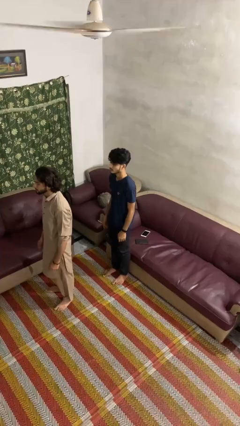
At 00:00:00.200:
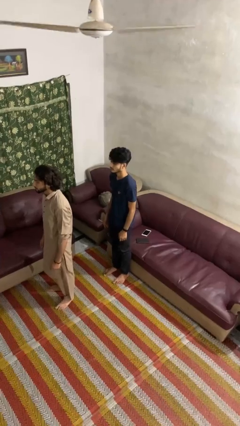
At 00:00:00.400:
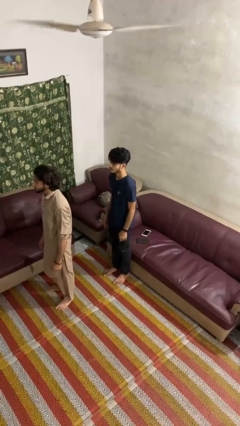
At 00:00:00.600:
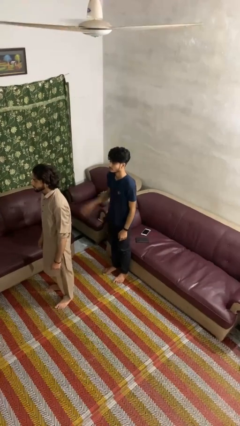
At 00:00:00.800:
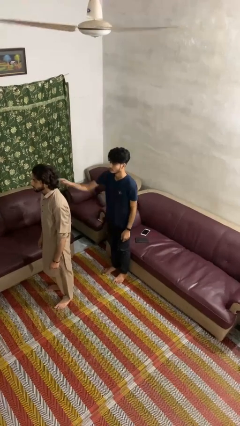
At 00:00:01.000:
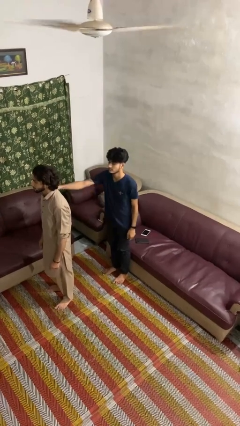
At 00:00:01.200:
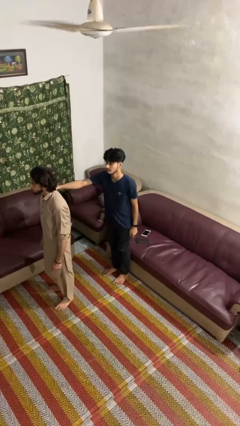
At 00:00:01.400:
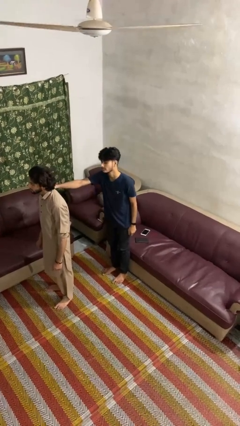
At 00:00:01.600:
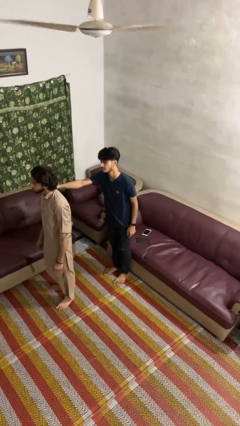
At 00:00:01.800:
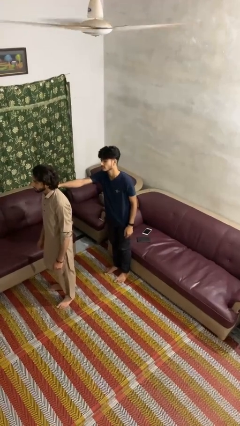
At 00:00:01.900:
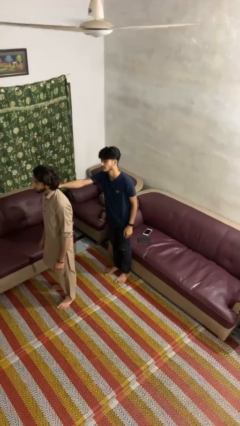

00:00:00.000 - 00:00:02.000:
person grabs person by shoulder

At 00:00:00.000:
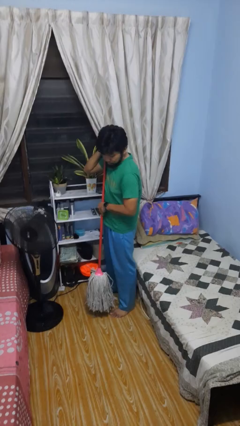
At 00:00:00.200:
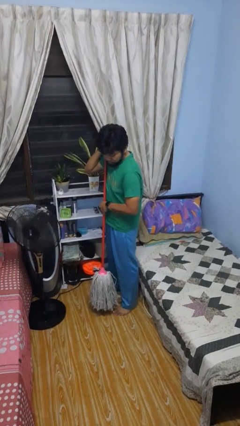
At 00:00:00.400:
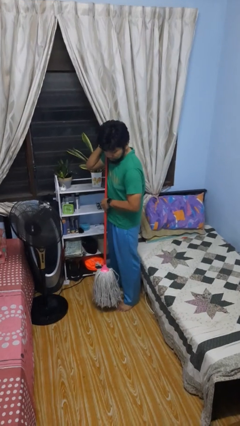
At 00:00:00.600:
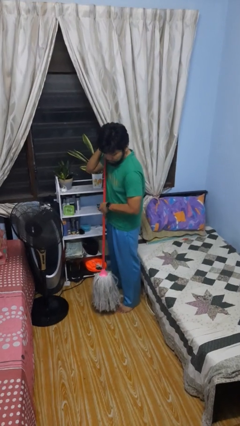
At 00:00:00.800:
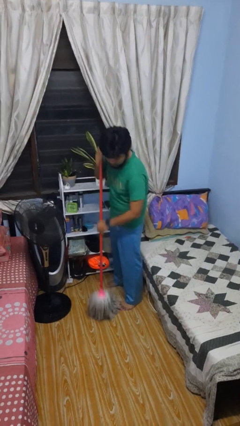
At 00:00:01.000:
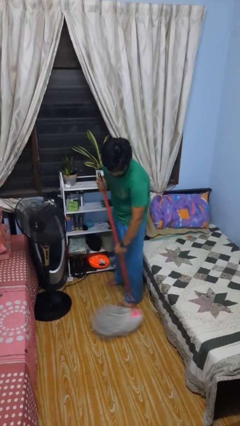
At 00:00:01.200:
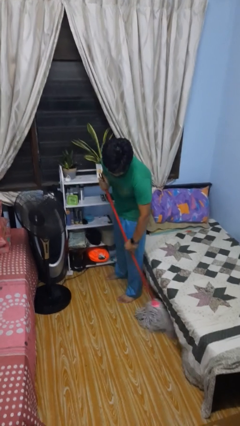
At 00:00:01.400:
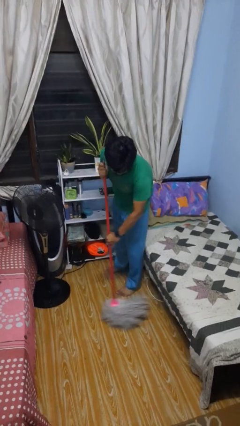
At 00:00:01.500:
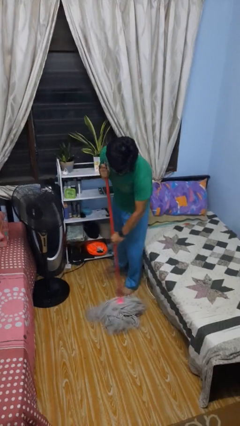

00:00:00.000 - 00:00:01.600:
person mops

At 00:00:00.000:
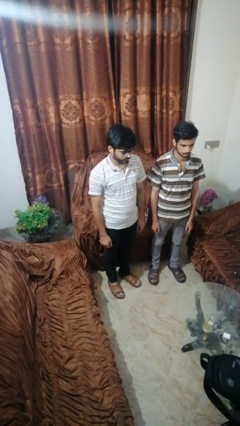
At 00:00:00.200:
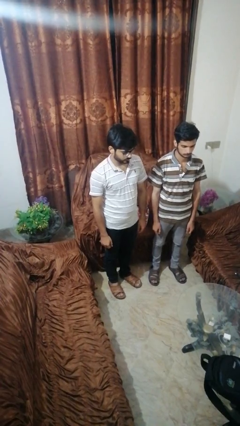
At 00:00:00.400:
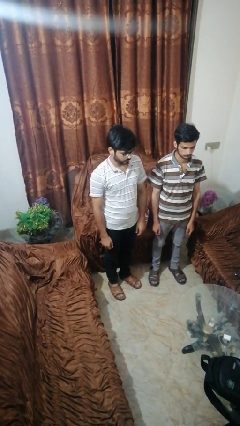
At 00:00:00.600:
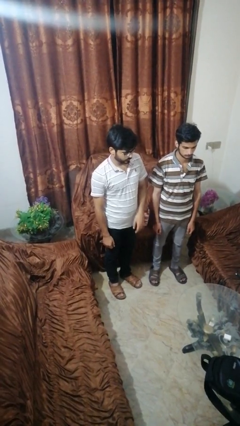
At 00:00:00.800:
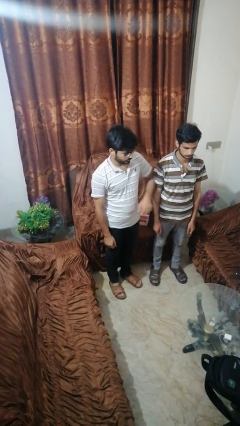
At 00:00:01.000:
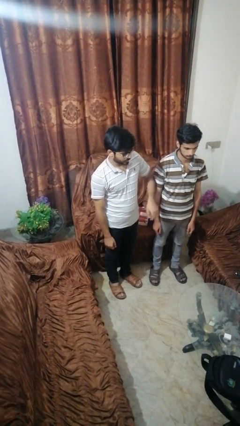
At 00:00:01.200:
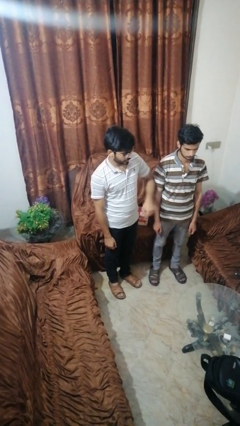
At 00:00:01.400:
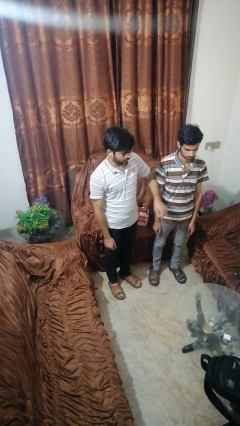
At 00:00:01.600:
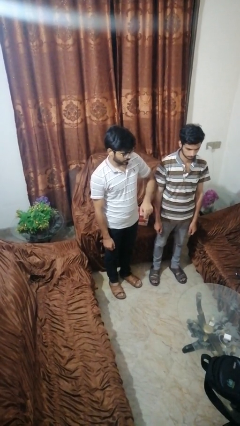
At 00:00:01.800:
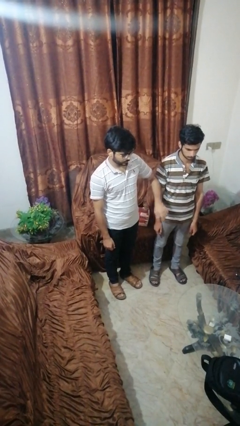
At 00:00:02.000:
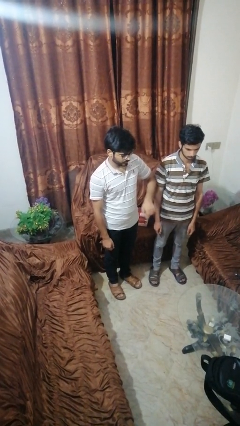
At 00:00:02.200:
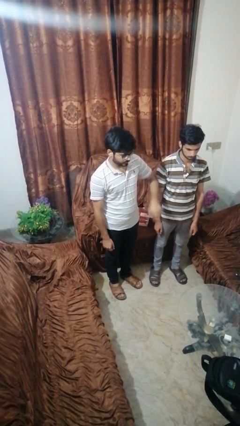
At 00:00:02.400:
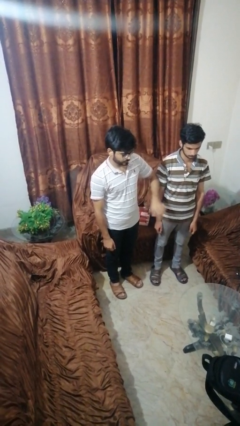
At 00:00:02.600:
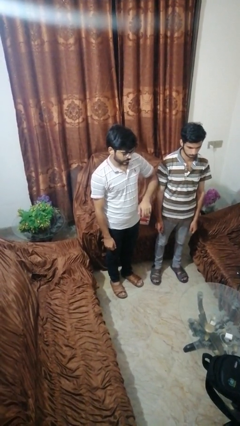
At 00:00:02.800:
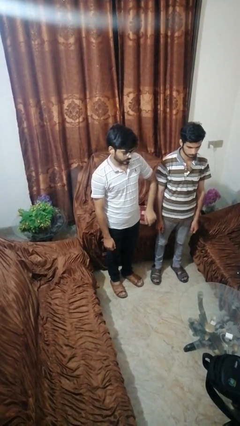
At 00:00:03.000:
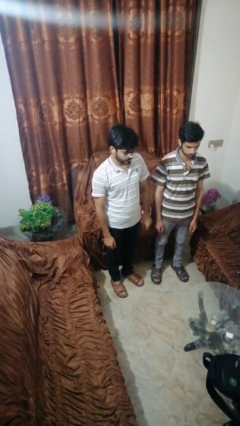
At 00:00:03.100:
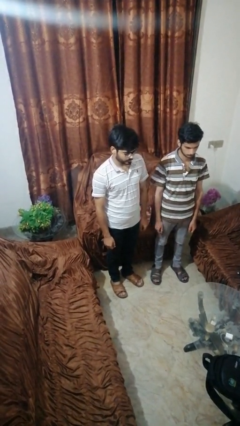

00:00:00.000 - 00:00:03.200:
person nudges person with elbow

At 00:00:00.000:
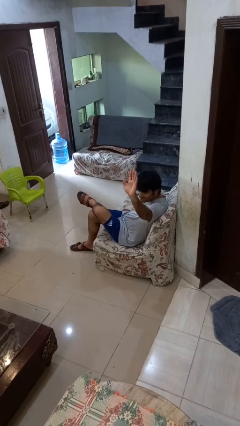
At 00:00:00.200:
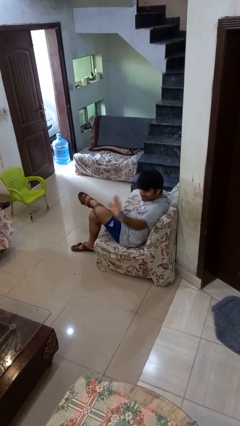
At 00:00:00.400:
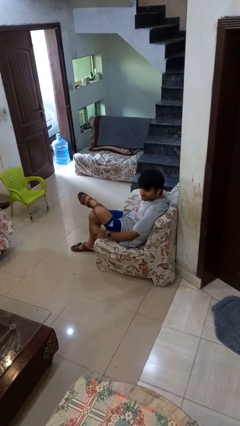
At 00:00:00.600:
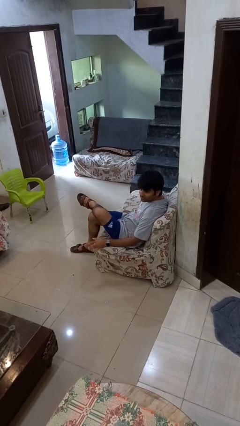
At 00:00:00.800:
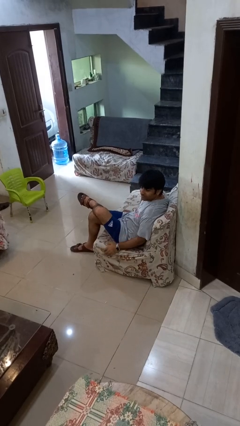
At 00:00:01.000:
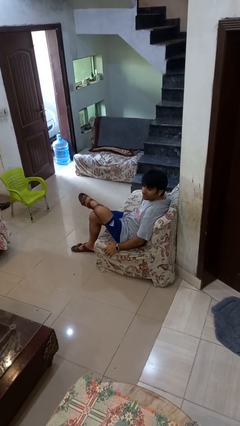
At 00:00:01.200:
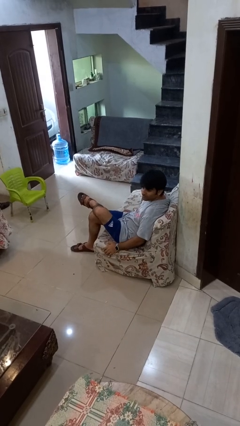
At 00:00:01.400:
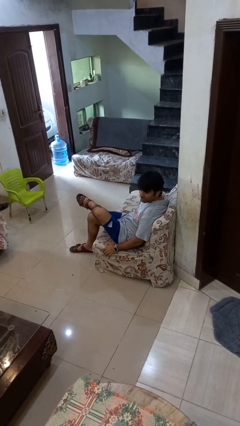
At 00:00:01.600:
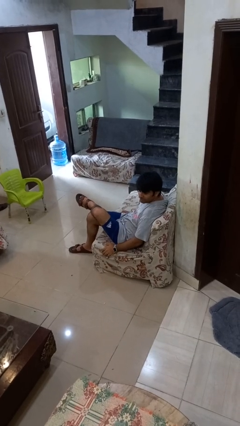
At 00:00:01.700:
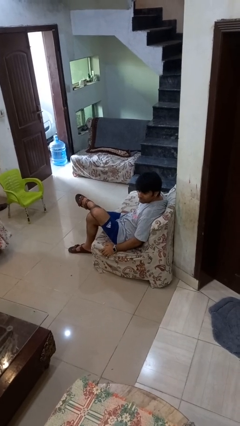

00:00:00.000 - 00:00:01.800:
person gestures lower hand

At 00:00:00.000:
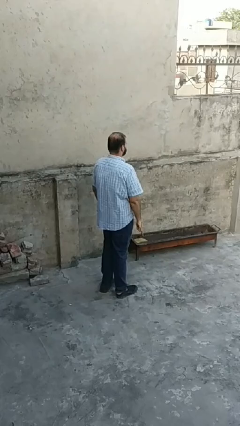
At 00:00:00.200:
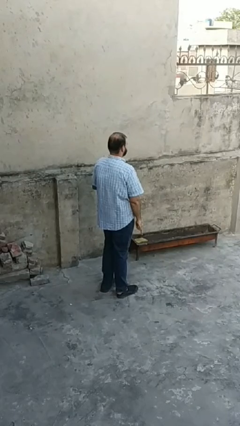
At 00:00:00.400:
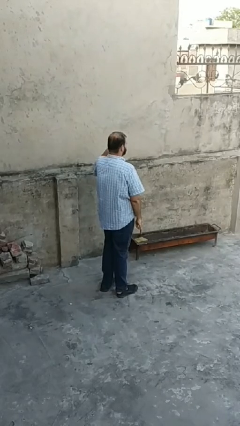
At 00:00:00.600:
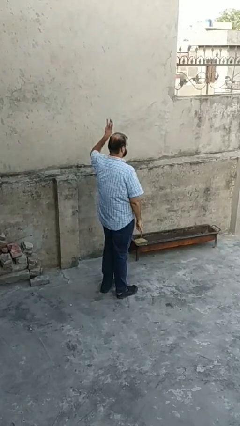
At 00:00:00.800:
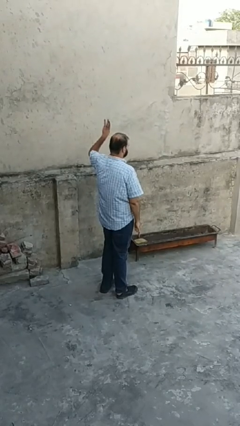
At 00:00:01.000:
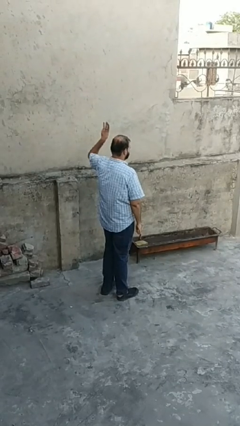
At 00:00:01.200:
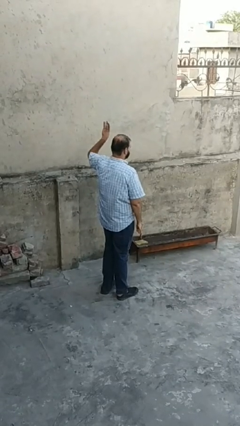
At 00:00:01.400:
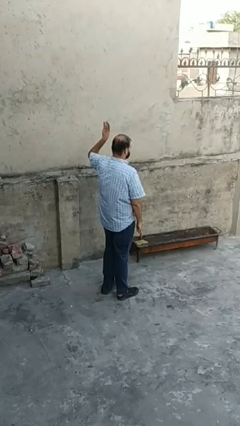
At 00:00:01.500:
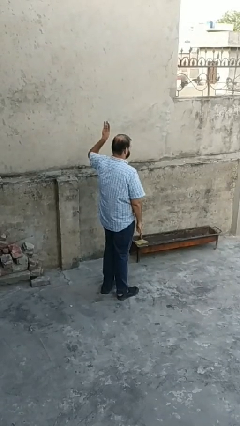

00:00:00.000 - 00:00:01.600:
person gestures number three

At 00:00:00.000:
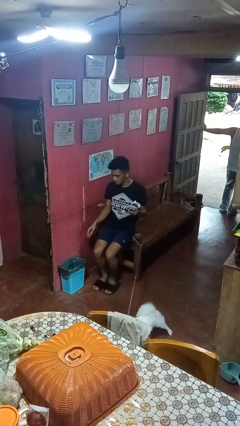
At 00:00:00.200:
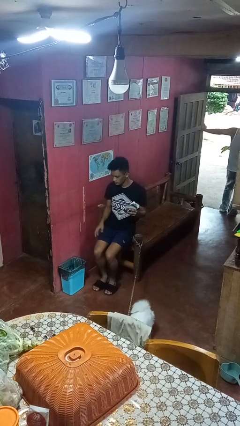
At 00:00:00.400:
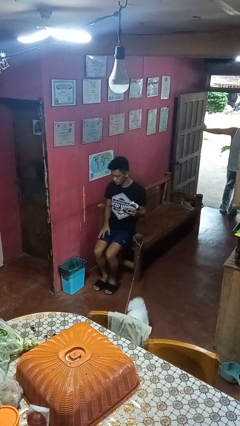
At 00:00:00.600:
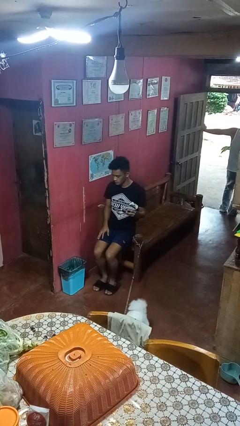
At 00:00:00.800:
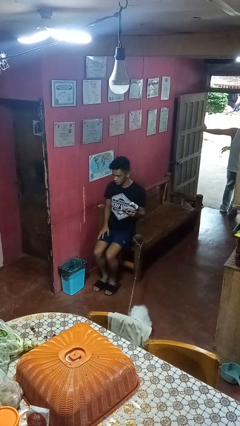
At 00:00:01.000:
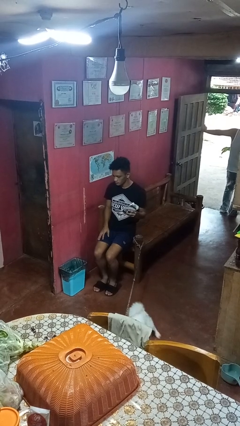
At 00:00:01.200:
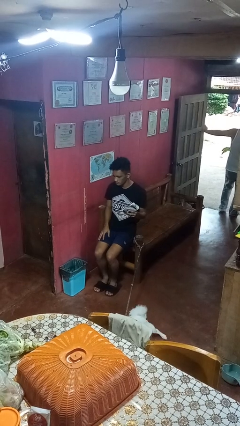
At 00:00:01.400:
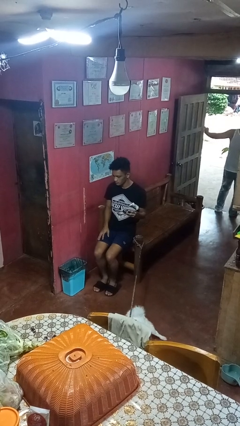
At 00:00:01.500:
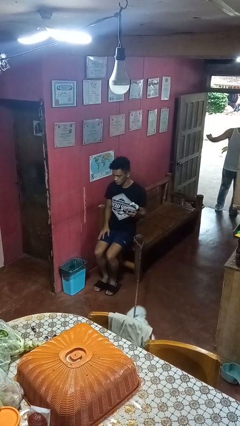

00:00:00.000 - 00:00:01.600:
person discards trash

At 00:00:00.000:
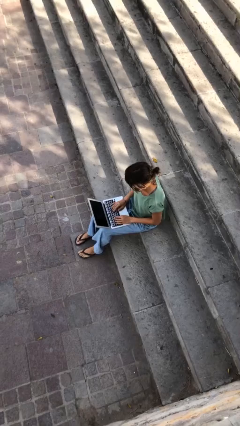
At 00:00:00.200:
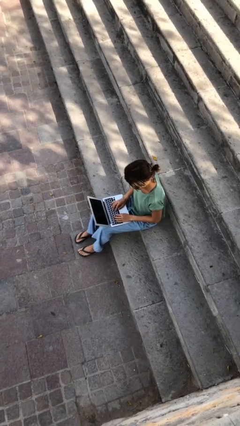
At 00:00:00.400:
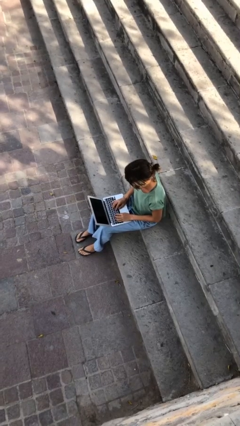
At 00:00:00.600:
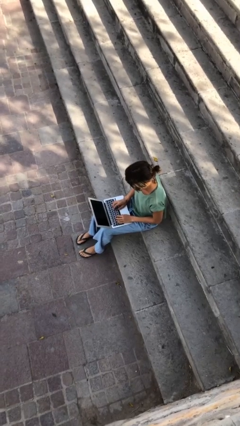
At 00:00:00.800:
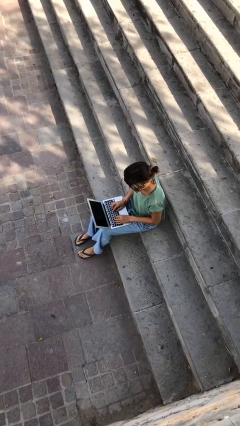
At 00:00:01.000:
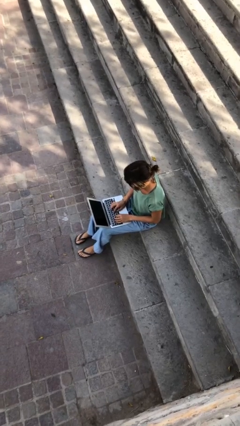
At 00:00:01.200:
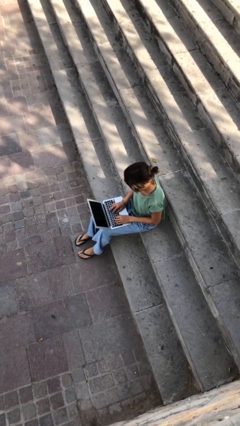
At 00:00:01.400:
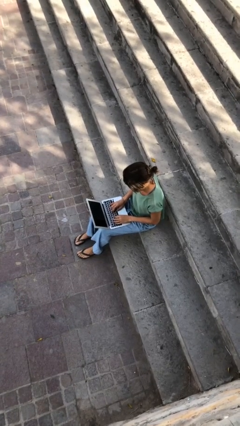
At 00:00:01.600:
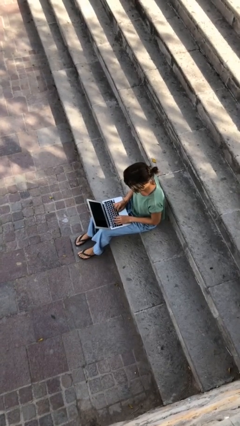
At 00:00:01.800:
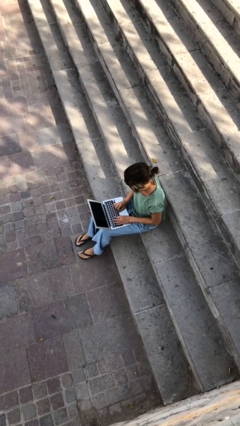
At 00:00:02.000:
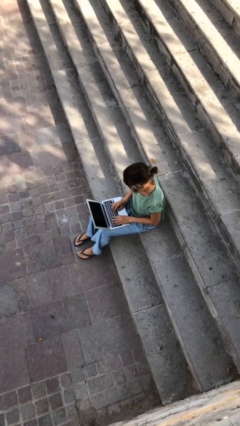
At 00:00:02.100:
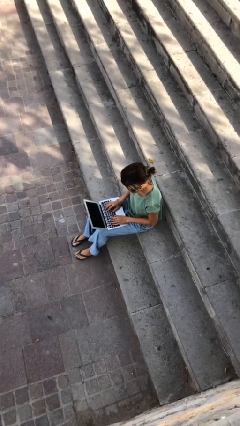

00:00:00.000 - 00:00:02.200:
person interacts with laptop

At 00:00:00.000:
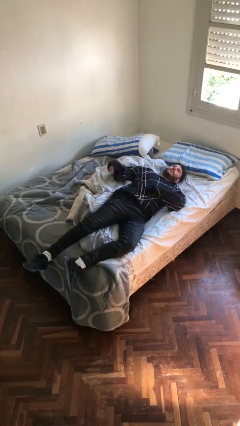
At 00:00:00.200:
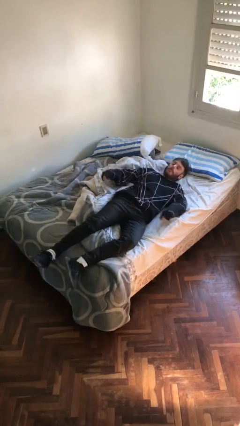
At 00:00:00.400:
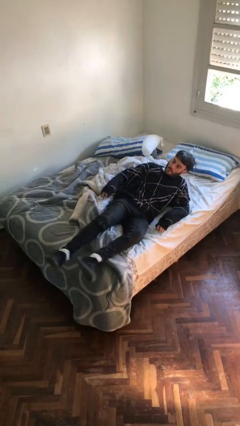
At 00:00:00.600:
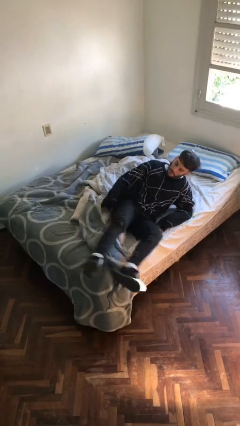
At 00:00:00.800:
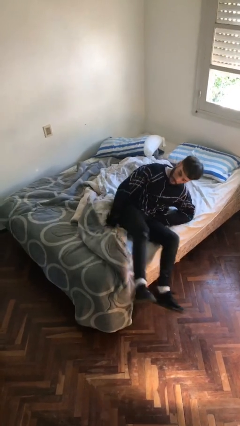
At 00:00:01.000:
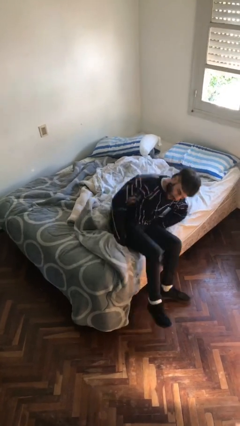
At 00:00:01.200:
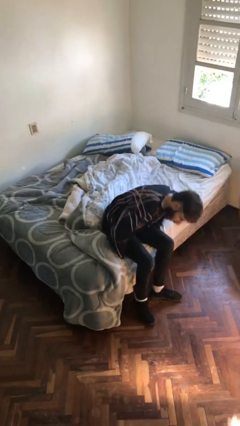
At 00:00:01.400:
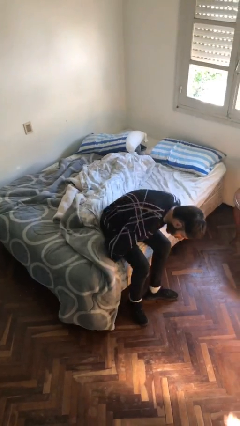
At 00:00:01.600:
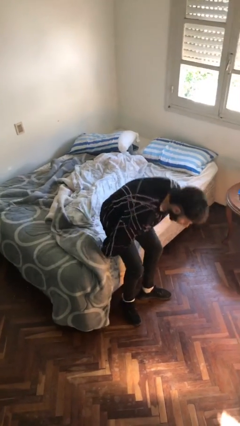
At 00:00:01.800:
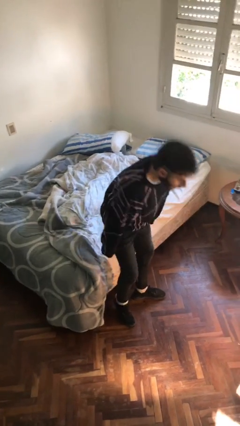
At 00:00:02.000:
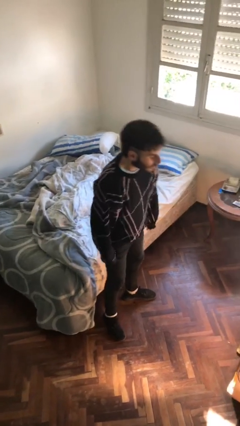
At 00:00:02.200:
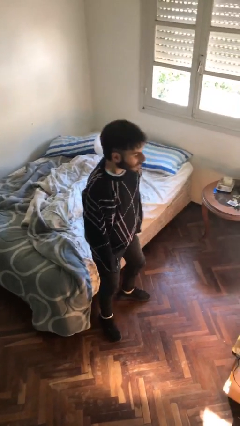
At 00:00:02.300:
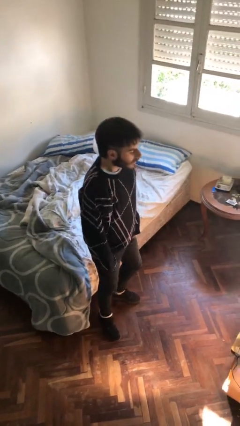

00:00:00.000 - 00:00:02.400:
person stands up
